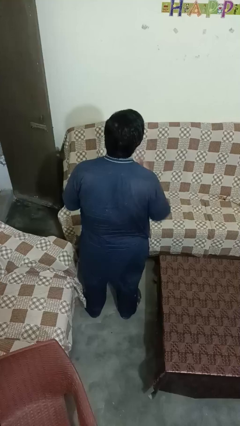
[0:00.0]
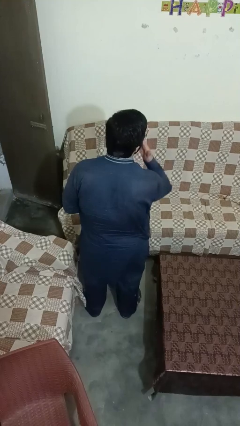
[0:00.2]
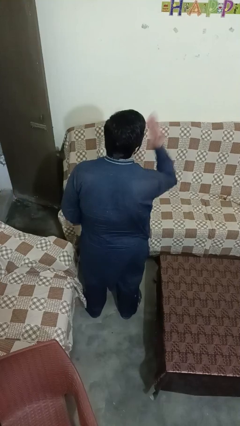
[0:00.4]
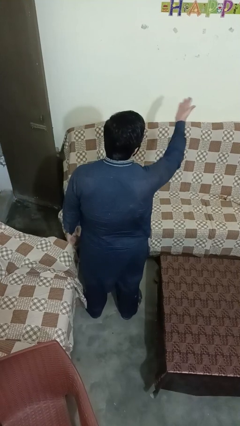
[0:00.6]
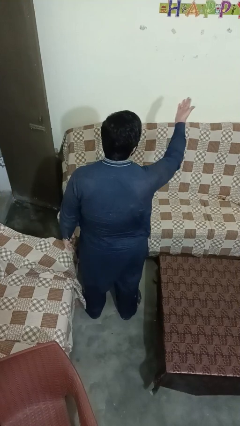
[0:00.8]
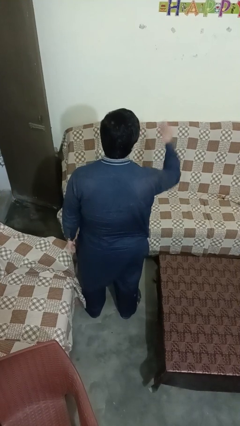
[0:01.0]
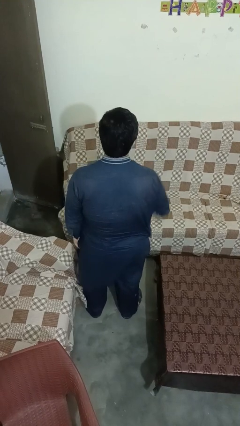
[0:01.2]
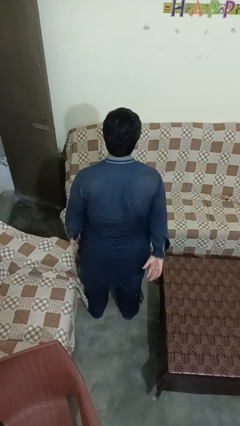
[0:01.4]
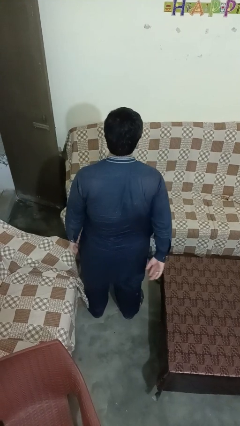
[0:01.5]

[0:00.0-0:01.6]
person gestures blow kiss

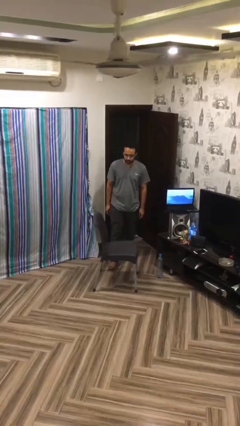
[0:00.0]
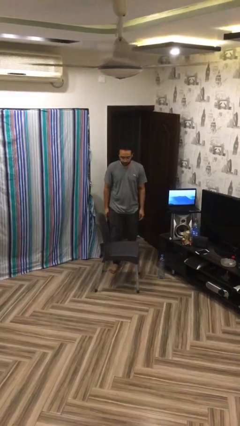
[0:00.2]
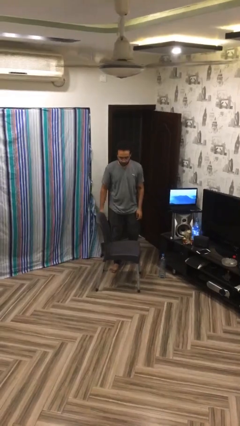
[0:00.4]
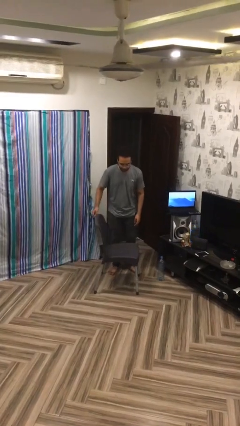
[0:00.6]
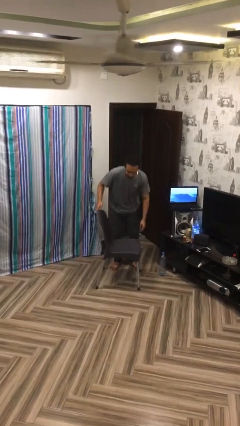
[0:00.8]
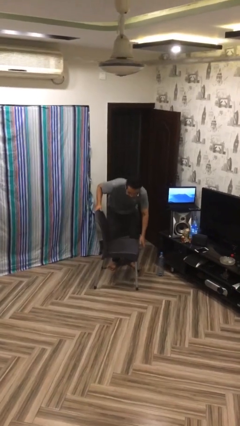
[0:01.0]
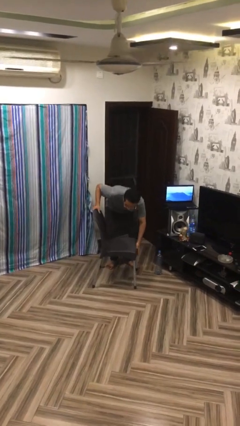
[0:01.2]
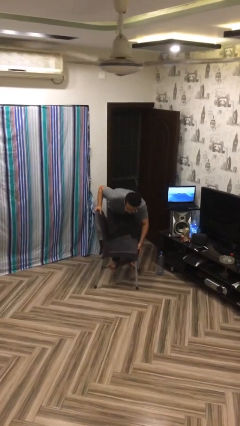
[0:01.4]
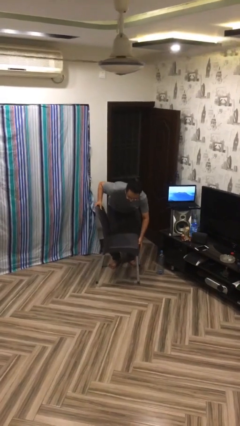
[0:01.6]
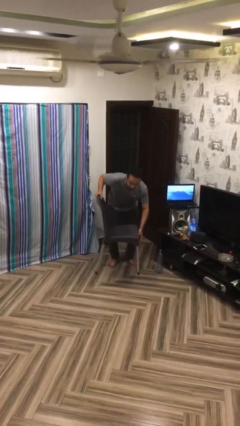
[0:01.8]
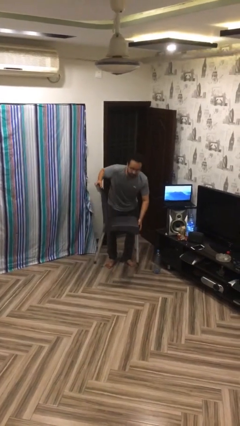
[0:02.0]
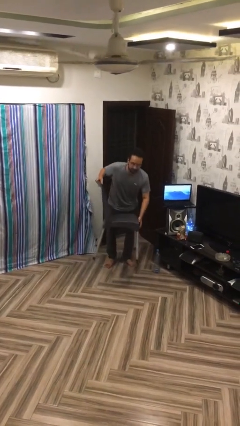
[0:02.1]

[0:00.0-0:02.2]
person picks up object from floor

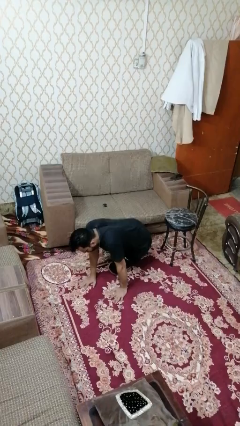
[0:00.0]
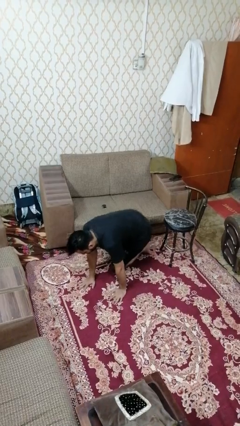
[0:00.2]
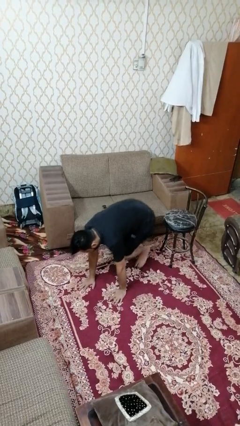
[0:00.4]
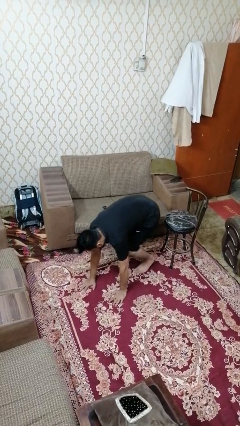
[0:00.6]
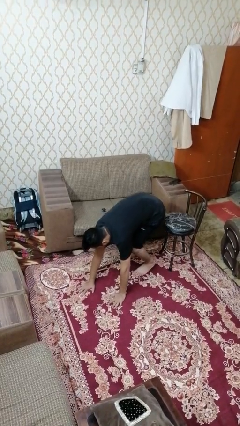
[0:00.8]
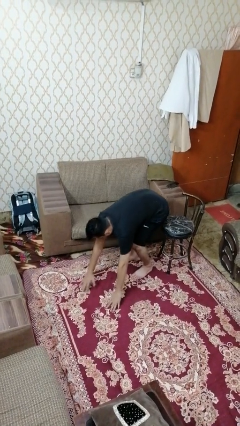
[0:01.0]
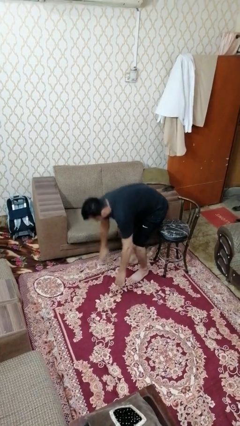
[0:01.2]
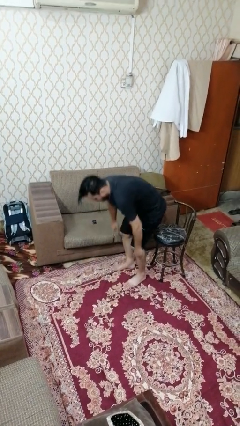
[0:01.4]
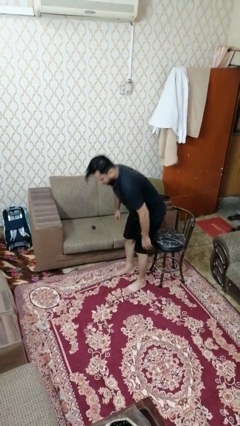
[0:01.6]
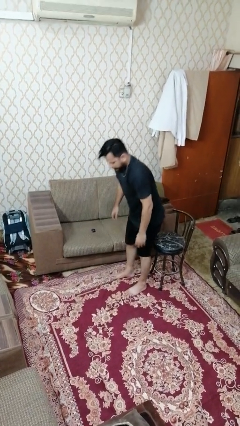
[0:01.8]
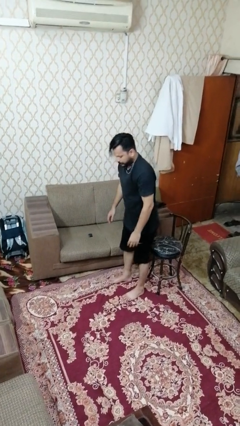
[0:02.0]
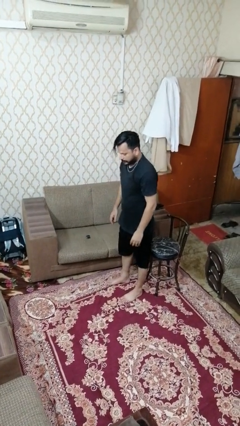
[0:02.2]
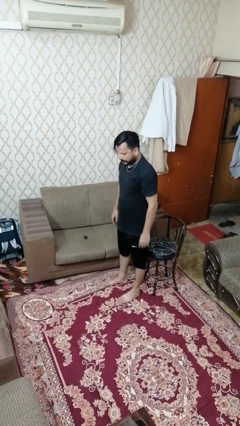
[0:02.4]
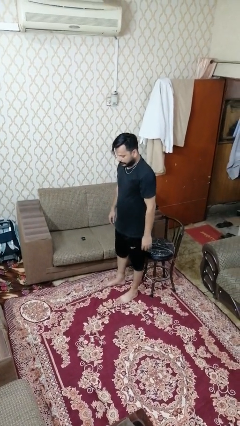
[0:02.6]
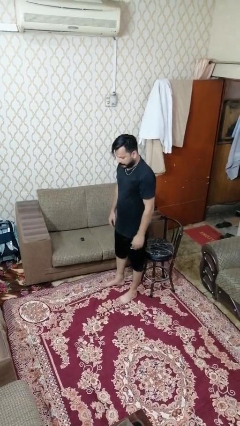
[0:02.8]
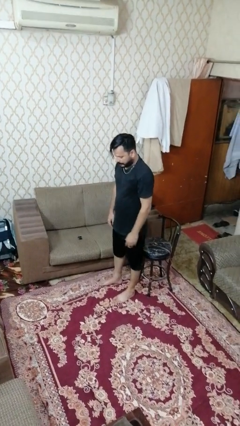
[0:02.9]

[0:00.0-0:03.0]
person stands up from floor

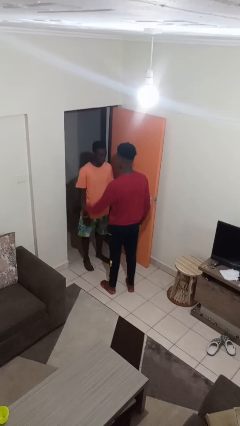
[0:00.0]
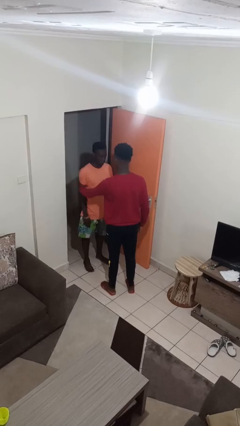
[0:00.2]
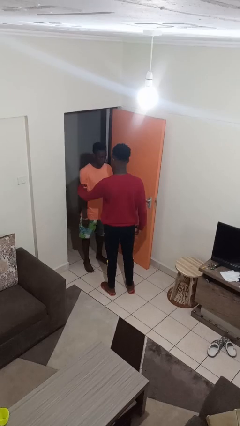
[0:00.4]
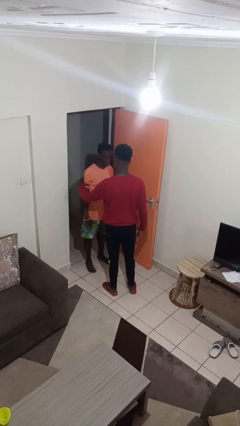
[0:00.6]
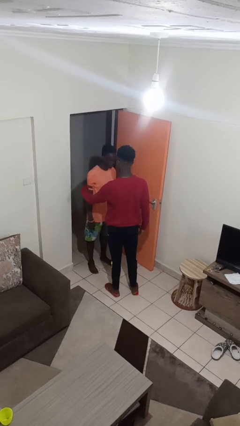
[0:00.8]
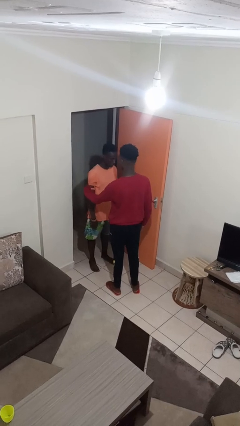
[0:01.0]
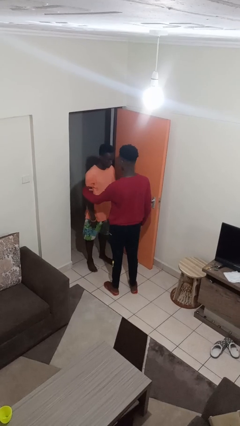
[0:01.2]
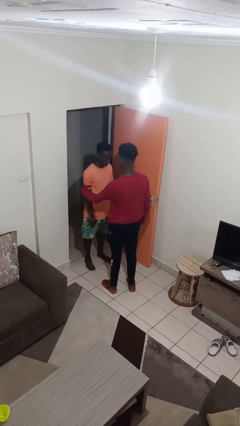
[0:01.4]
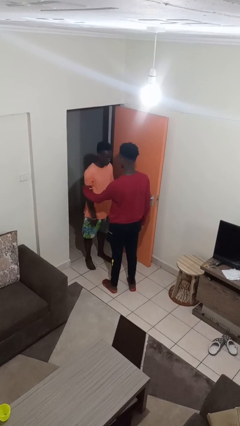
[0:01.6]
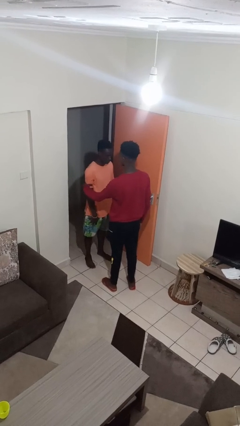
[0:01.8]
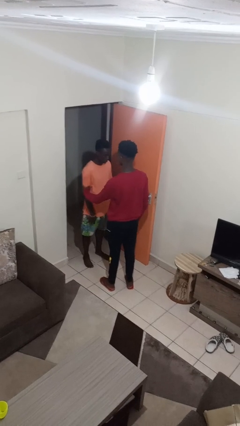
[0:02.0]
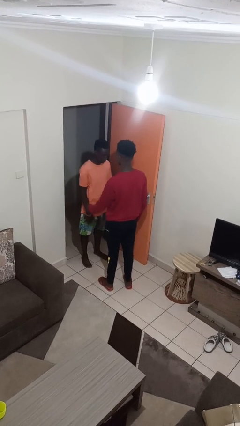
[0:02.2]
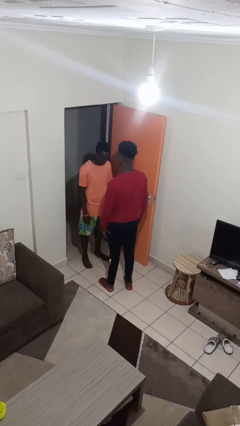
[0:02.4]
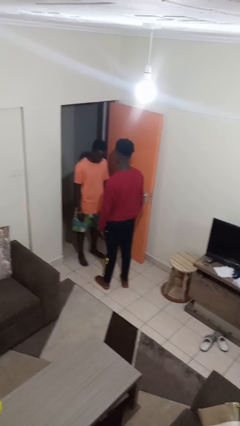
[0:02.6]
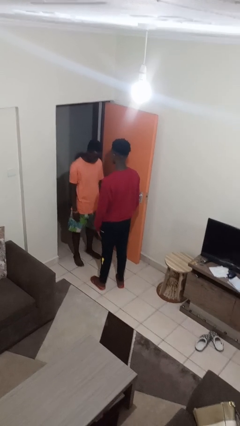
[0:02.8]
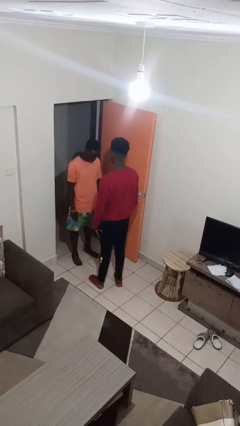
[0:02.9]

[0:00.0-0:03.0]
person grabs person by bicep

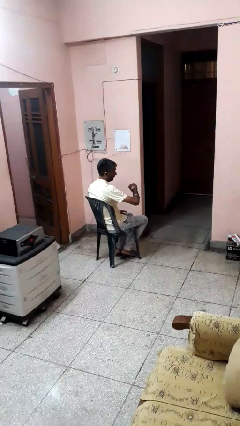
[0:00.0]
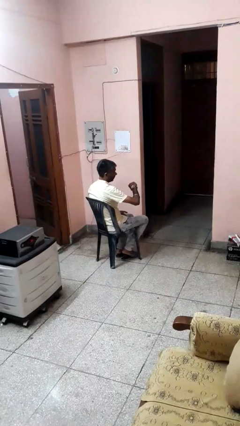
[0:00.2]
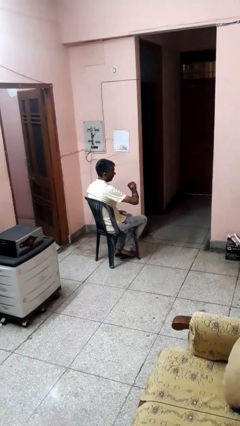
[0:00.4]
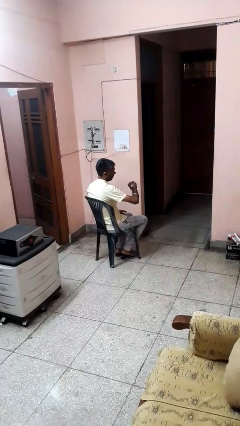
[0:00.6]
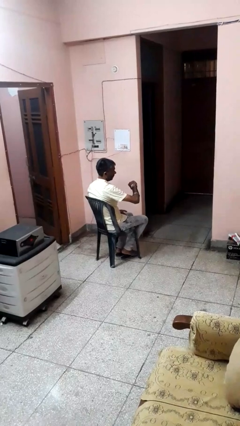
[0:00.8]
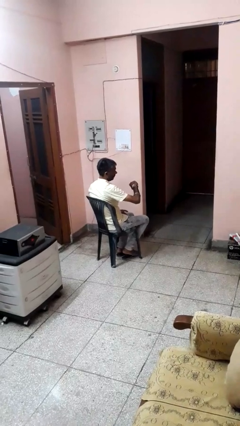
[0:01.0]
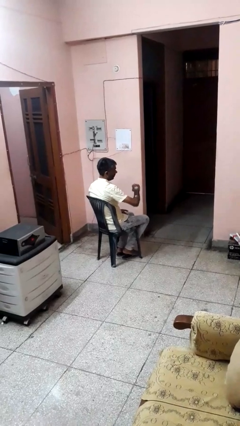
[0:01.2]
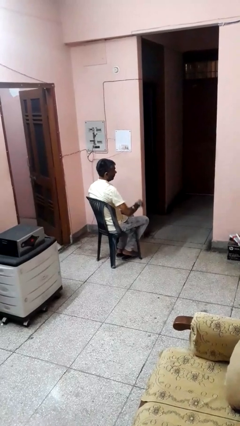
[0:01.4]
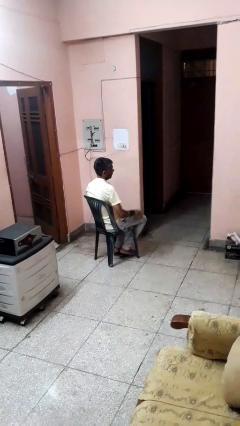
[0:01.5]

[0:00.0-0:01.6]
person looks at wristwatch

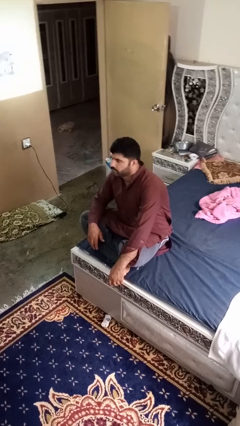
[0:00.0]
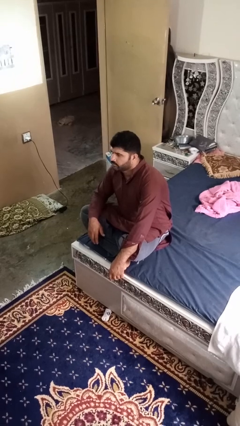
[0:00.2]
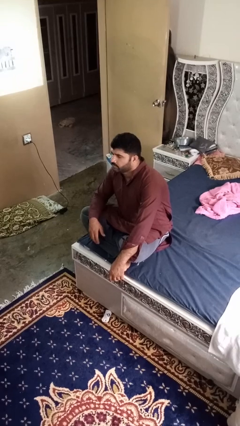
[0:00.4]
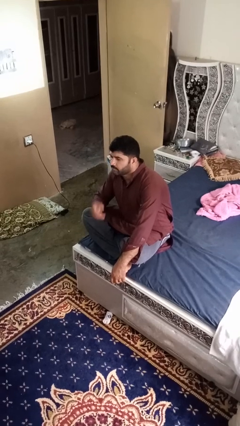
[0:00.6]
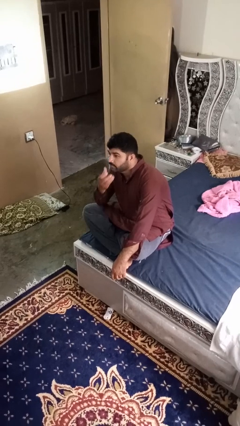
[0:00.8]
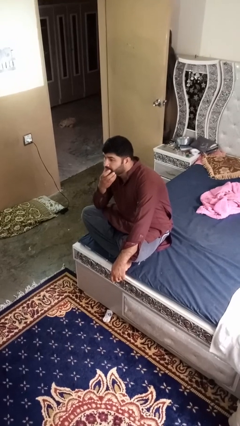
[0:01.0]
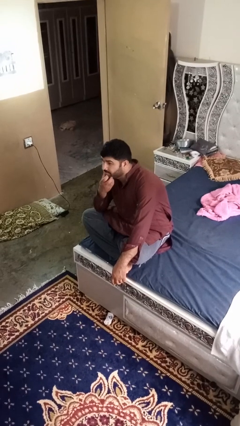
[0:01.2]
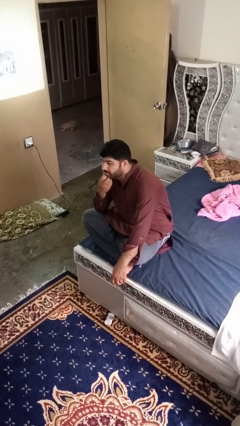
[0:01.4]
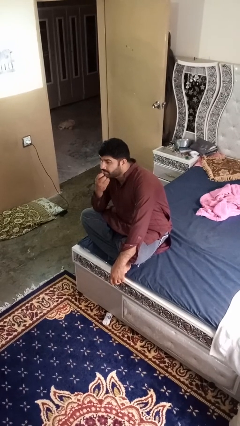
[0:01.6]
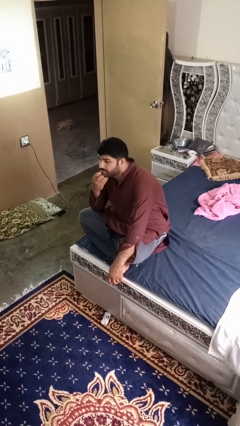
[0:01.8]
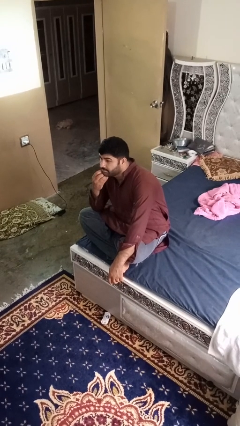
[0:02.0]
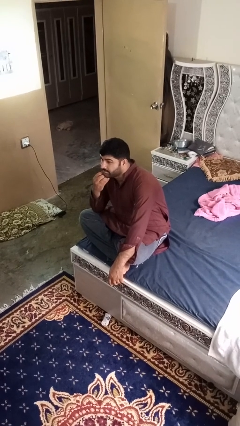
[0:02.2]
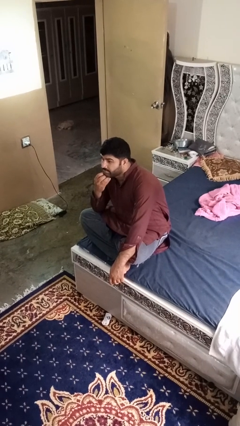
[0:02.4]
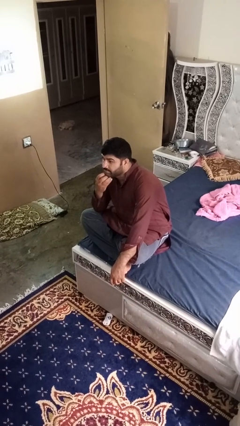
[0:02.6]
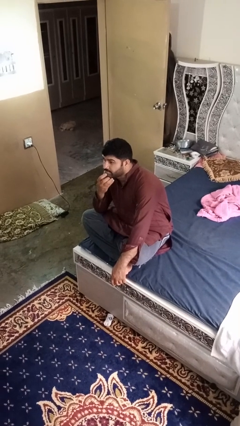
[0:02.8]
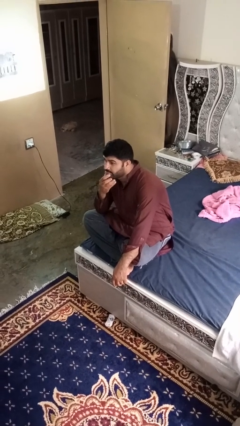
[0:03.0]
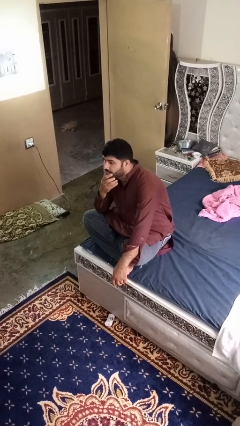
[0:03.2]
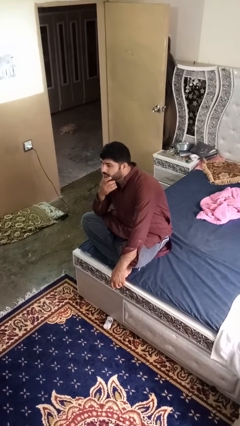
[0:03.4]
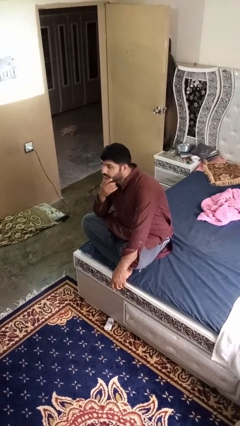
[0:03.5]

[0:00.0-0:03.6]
person strokes chin

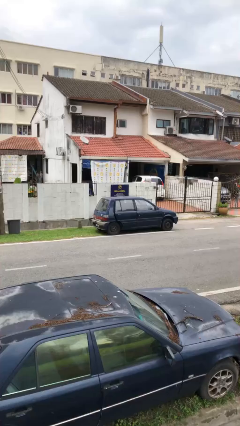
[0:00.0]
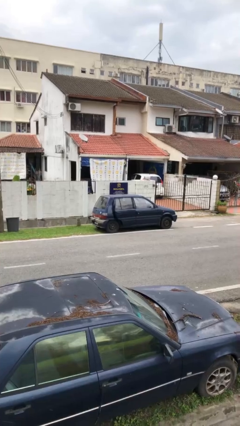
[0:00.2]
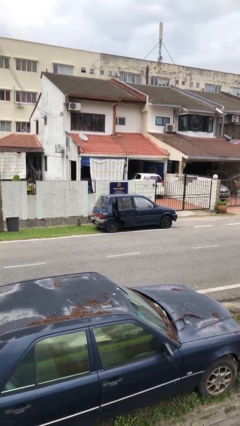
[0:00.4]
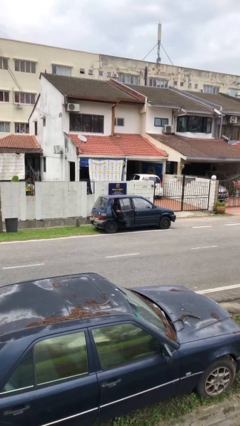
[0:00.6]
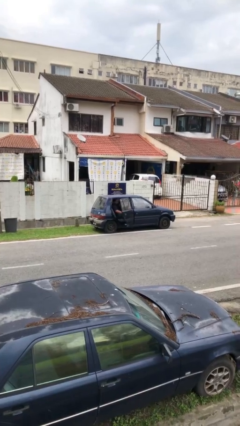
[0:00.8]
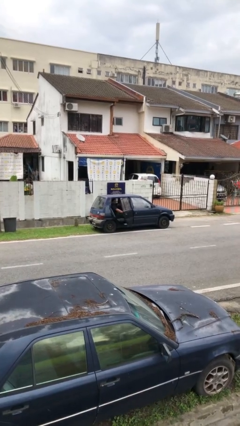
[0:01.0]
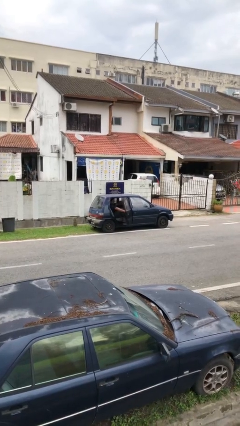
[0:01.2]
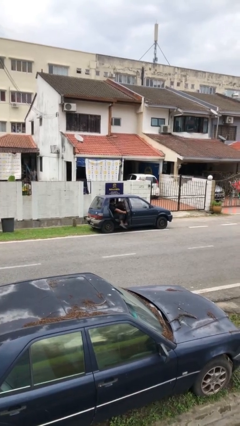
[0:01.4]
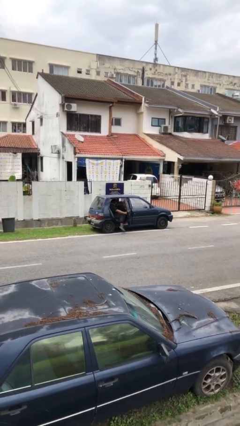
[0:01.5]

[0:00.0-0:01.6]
person opens car door

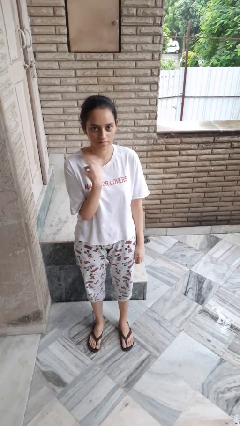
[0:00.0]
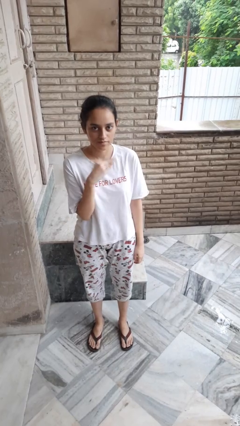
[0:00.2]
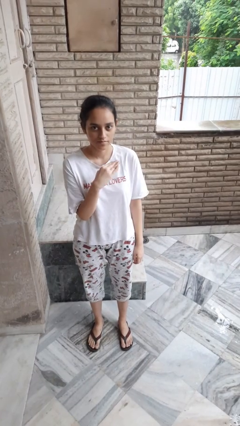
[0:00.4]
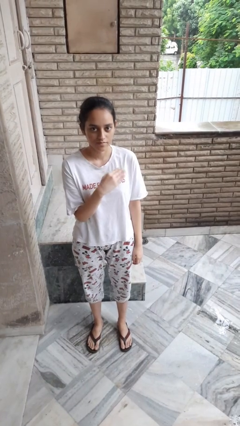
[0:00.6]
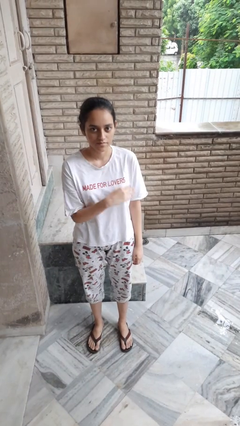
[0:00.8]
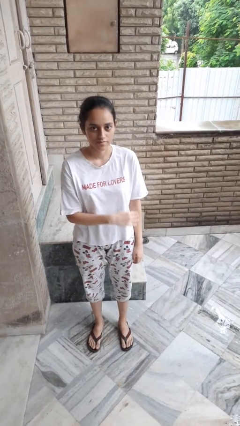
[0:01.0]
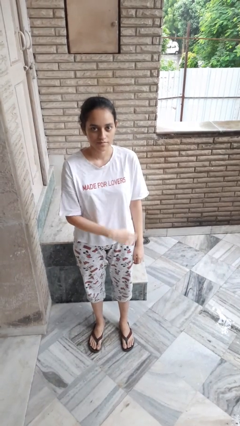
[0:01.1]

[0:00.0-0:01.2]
person gestures cut
